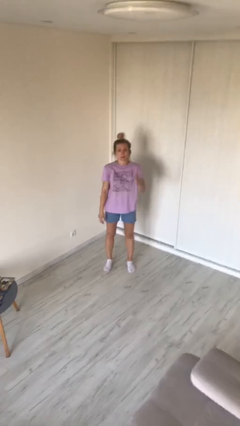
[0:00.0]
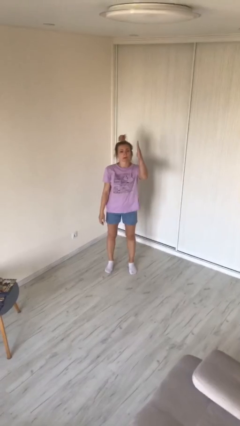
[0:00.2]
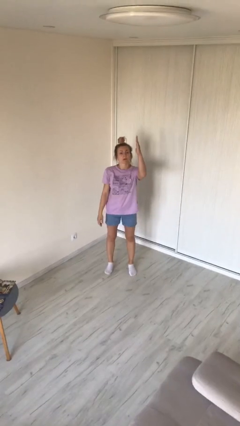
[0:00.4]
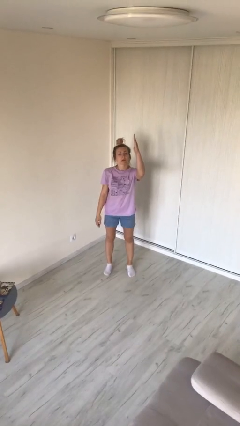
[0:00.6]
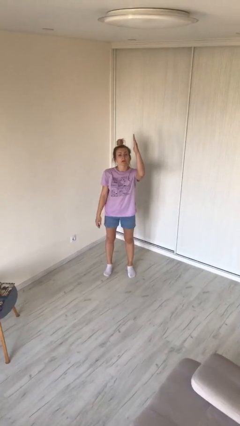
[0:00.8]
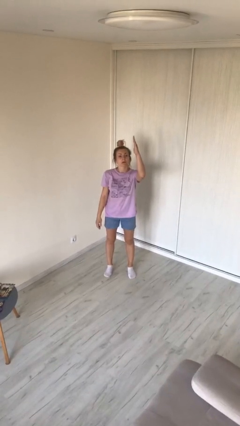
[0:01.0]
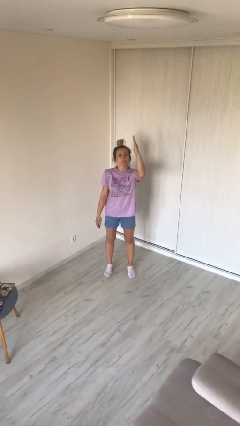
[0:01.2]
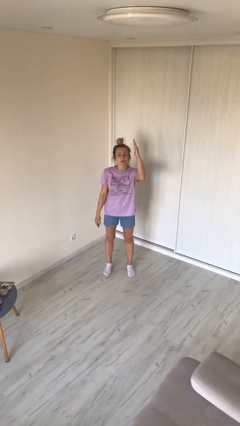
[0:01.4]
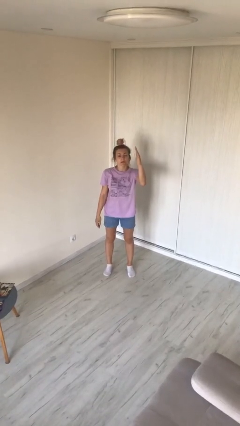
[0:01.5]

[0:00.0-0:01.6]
person gestures raise hand

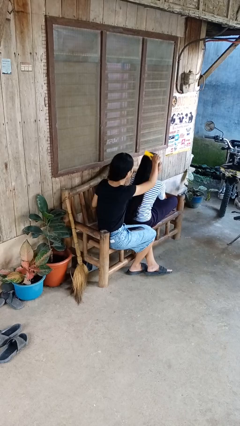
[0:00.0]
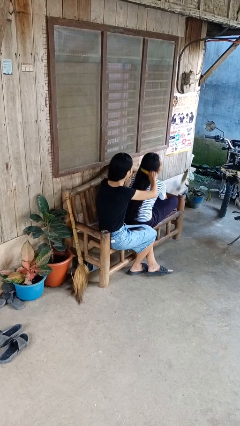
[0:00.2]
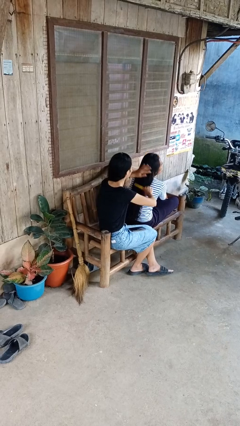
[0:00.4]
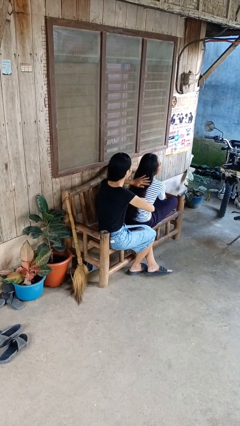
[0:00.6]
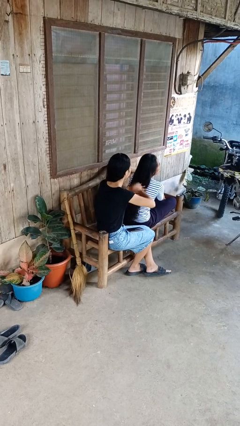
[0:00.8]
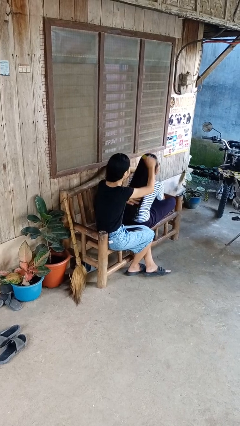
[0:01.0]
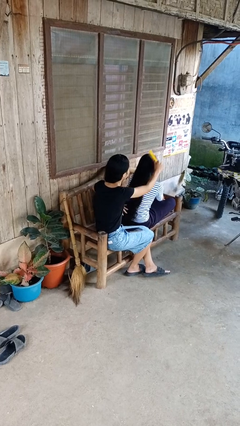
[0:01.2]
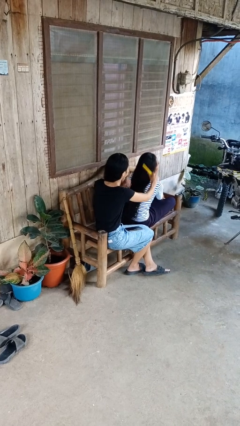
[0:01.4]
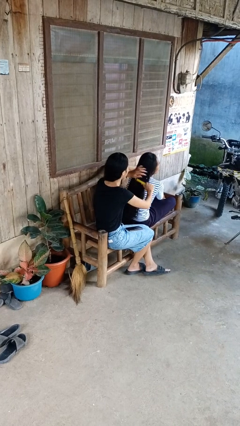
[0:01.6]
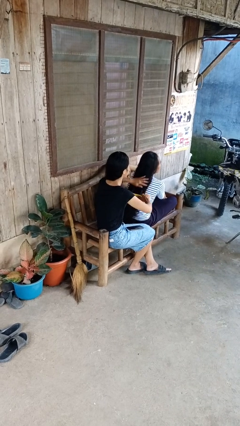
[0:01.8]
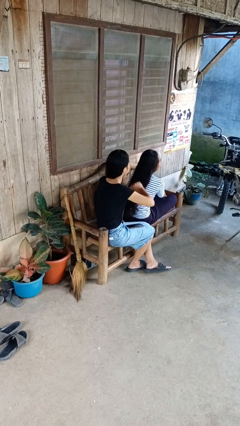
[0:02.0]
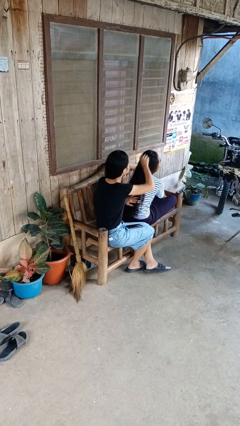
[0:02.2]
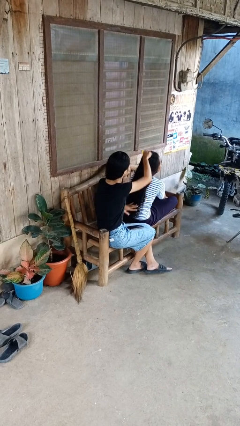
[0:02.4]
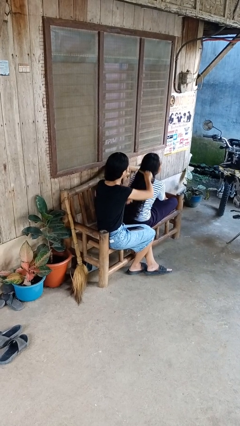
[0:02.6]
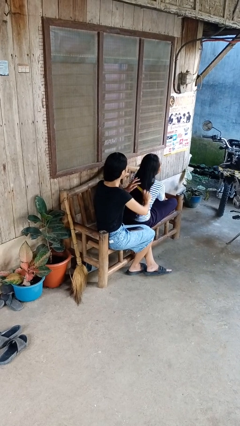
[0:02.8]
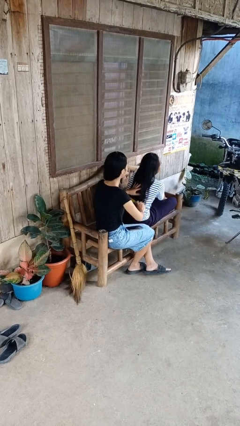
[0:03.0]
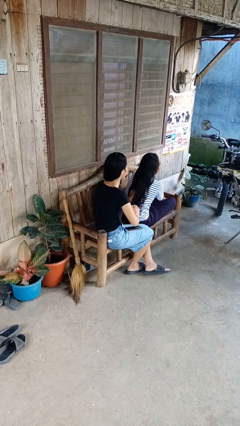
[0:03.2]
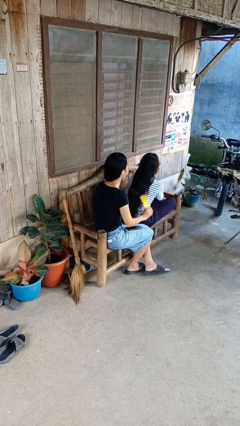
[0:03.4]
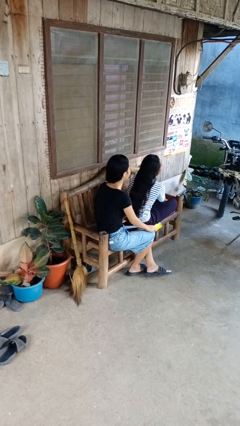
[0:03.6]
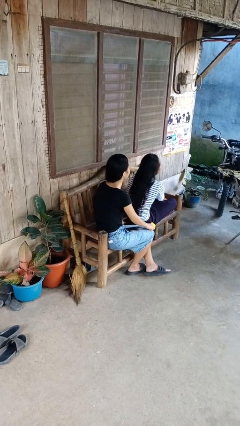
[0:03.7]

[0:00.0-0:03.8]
person brushes hair of person

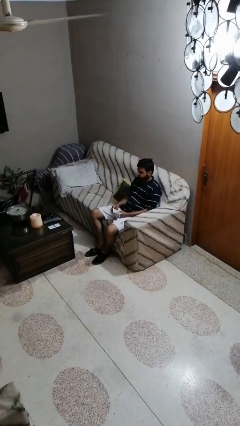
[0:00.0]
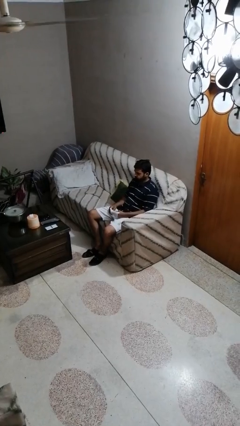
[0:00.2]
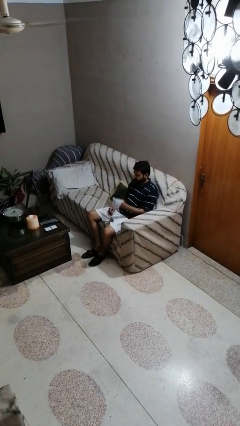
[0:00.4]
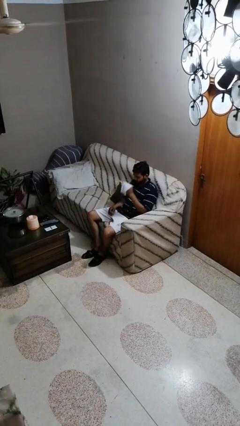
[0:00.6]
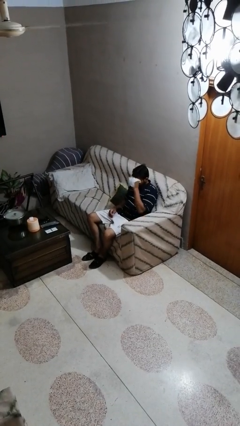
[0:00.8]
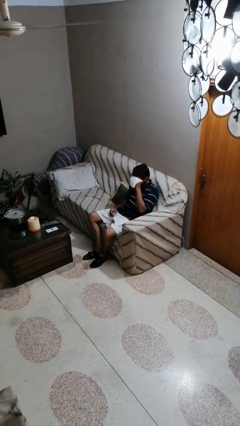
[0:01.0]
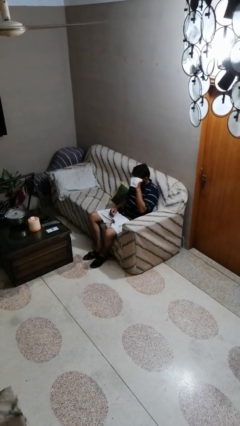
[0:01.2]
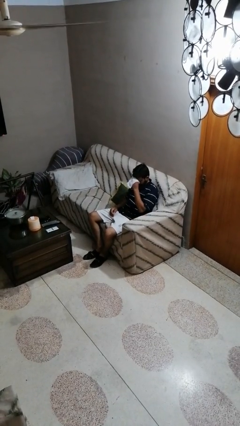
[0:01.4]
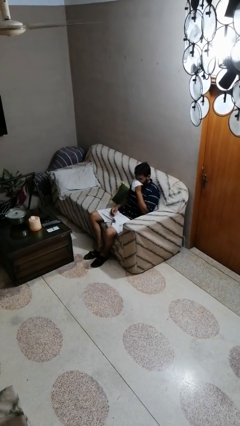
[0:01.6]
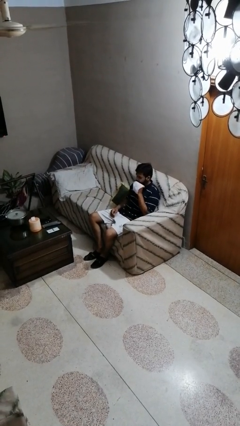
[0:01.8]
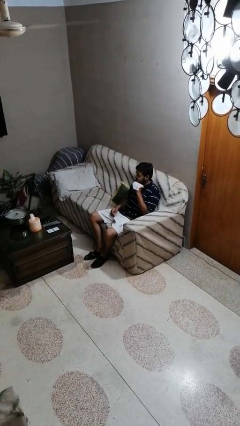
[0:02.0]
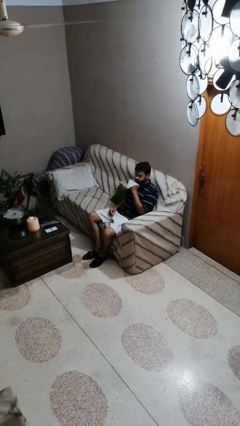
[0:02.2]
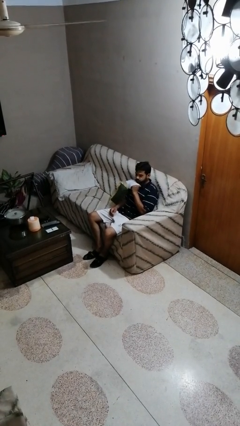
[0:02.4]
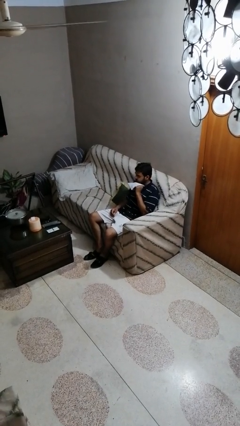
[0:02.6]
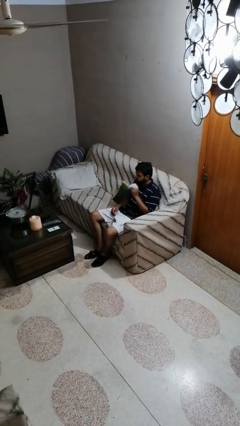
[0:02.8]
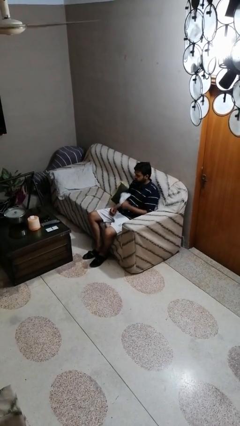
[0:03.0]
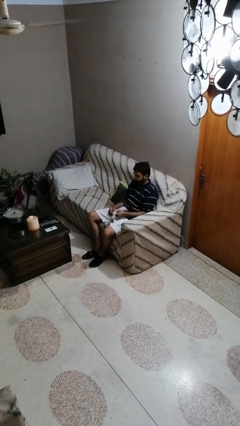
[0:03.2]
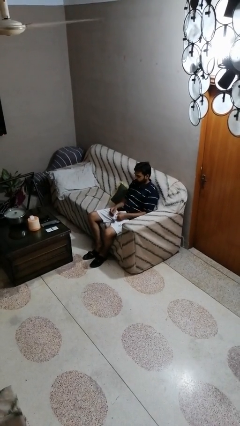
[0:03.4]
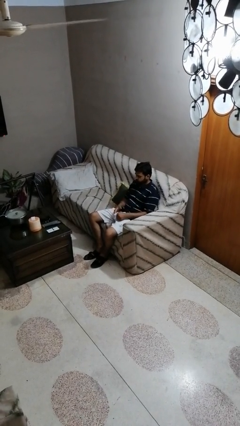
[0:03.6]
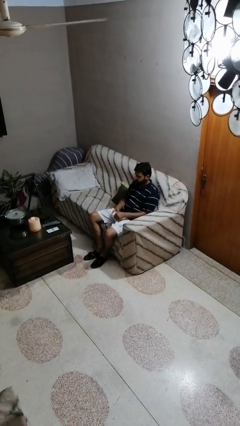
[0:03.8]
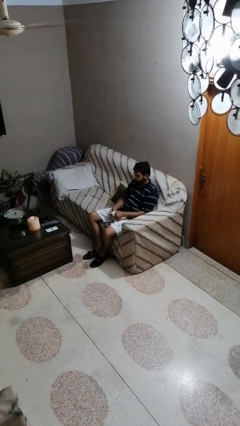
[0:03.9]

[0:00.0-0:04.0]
person wipes mouth with napkin

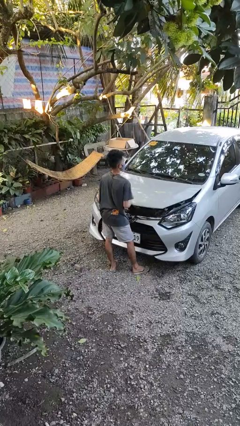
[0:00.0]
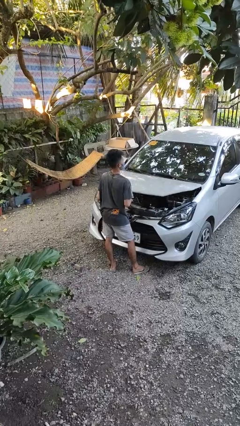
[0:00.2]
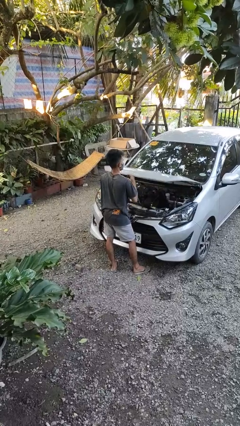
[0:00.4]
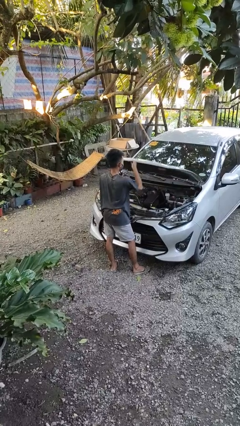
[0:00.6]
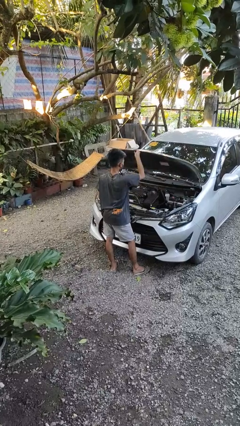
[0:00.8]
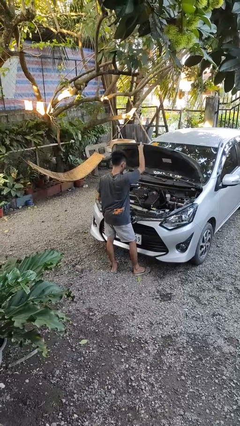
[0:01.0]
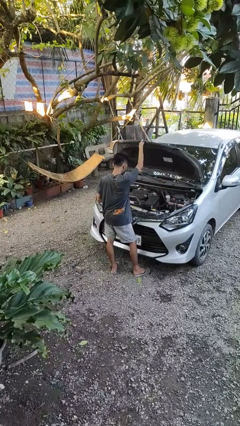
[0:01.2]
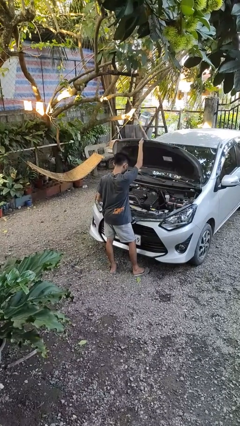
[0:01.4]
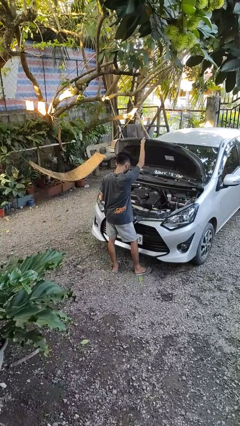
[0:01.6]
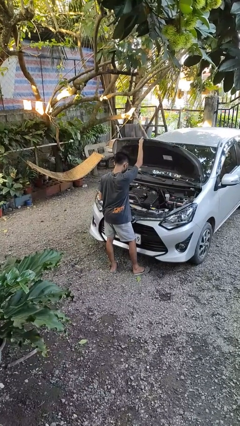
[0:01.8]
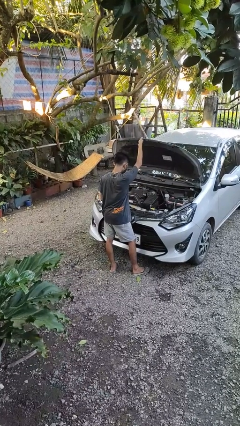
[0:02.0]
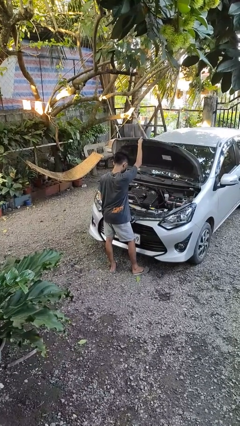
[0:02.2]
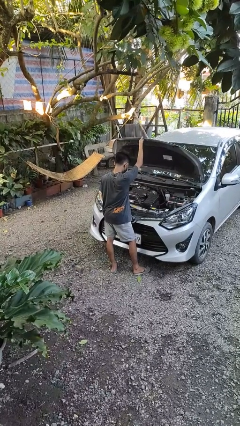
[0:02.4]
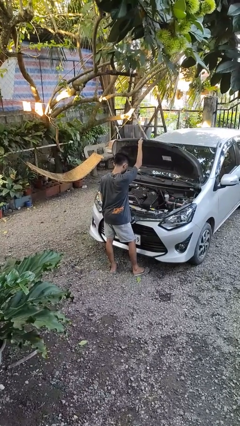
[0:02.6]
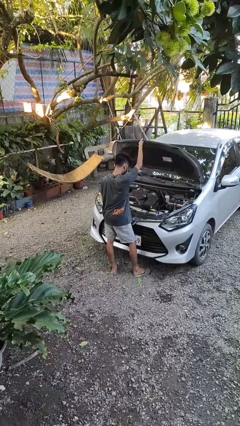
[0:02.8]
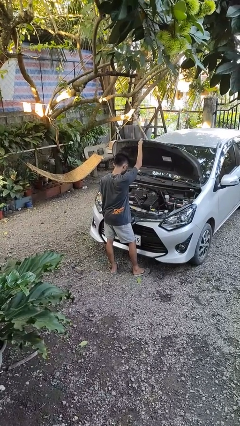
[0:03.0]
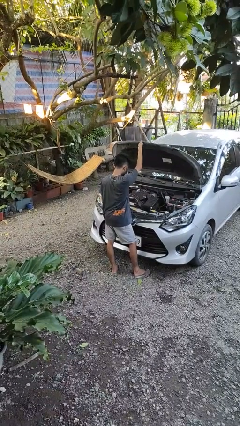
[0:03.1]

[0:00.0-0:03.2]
person opens car hood

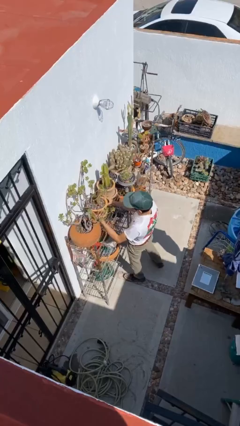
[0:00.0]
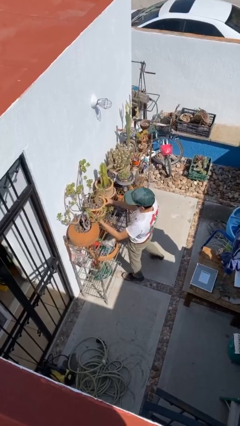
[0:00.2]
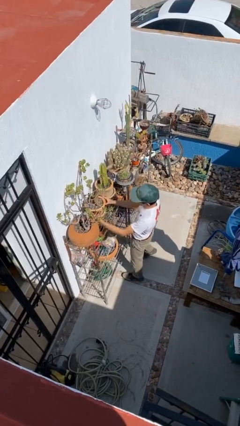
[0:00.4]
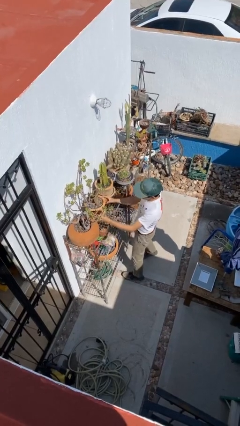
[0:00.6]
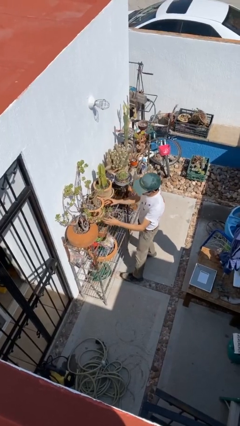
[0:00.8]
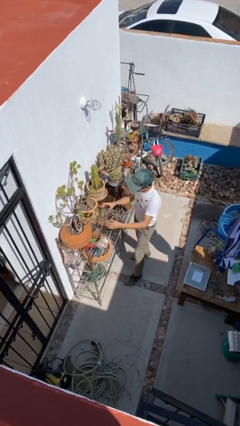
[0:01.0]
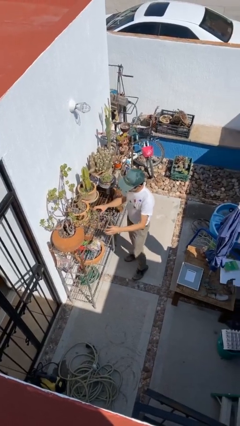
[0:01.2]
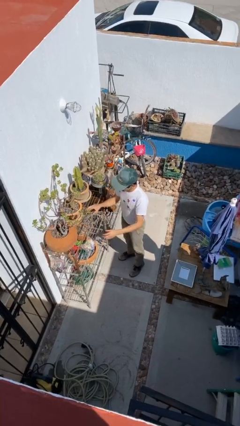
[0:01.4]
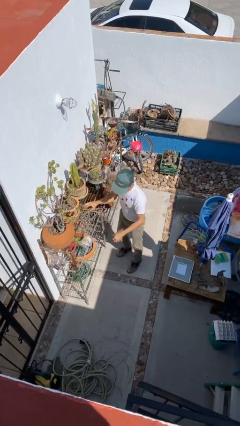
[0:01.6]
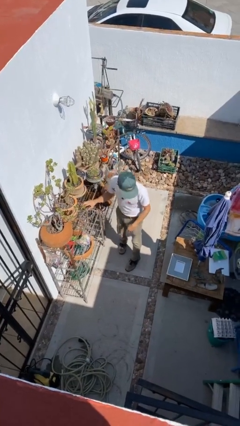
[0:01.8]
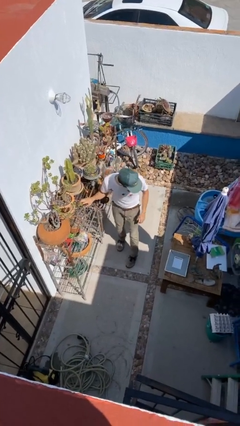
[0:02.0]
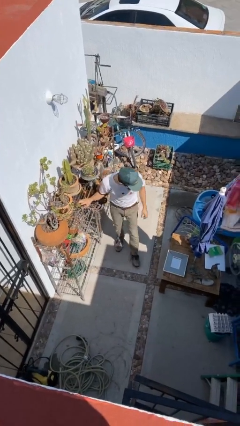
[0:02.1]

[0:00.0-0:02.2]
person puts down object on shelf

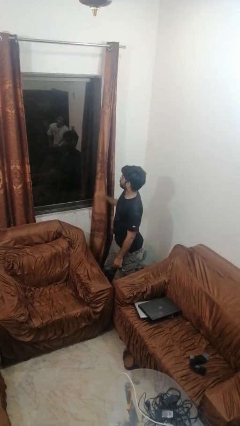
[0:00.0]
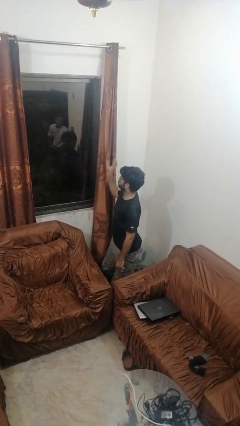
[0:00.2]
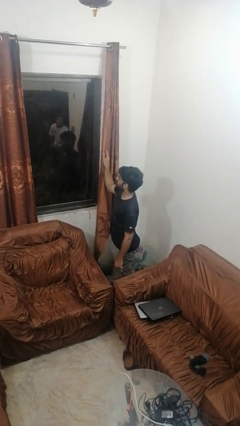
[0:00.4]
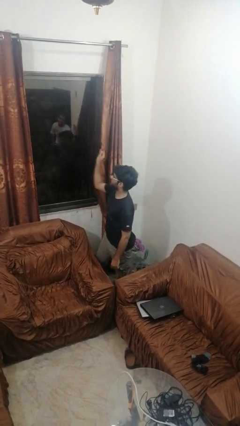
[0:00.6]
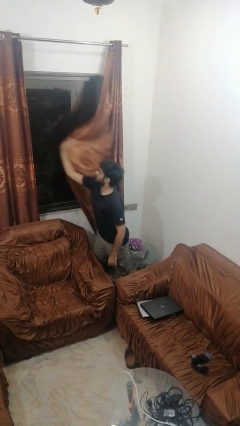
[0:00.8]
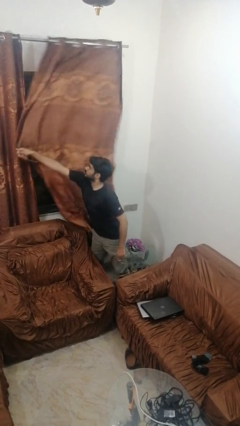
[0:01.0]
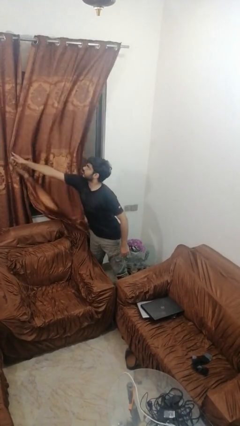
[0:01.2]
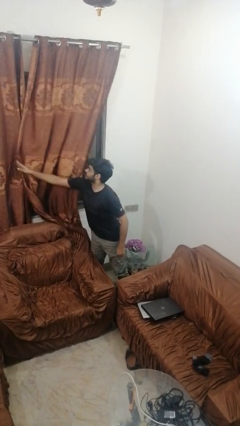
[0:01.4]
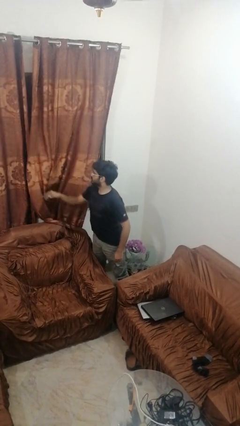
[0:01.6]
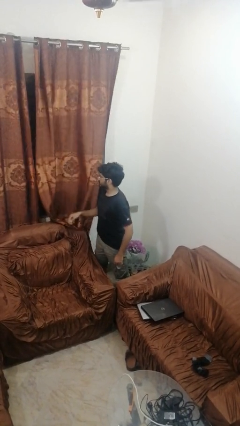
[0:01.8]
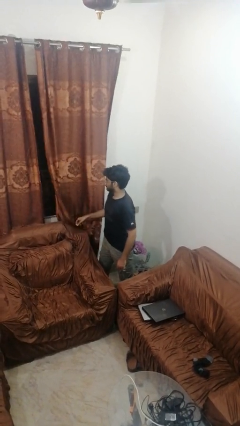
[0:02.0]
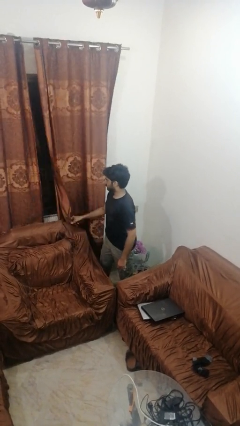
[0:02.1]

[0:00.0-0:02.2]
person closes curtains

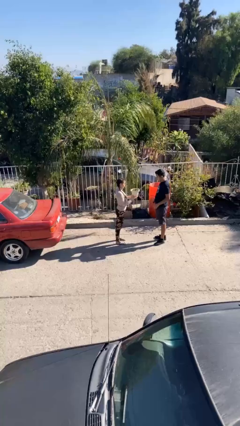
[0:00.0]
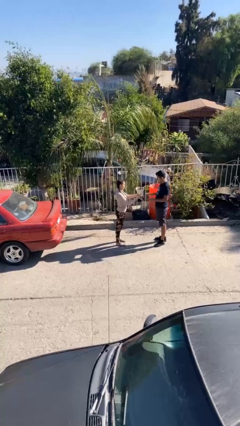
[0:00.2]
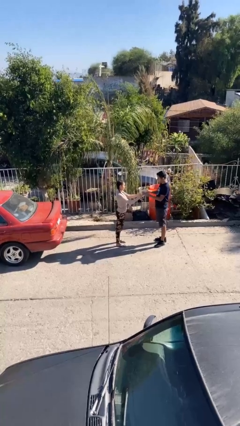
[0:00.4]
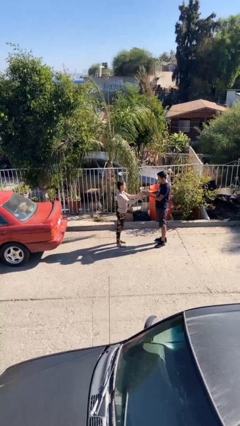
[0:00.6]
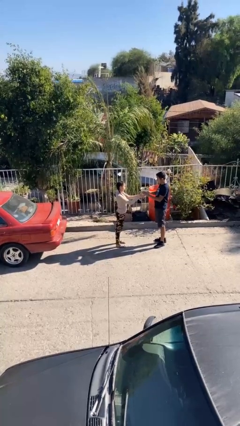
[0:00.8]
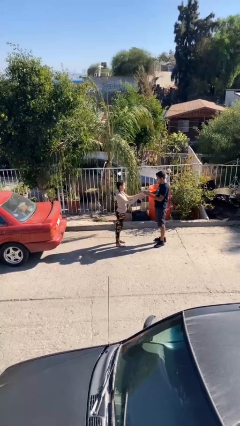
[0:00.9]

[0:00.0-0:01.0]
person transfers object to person
